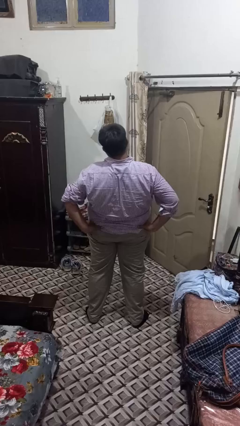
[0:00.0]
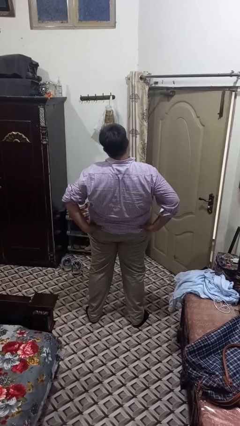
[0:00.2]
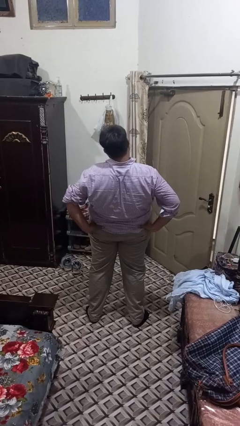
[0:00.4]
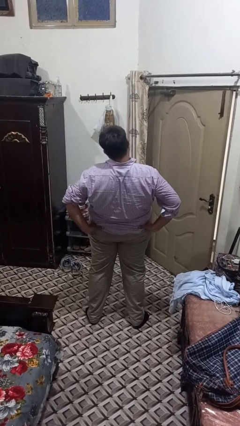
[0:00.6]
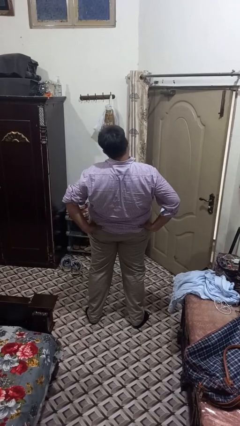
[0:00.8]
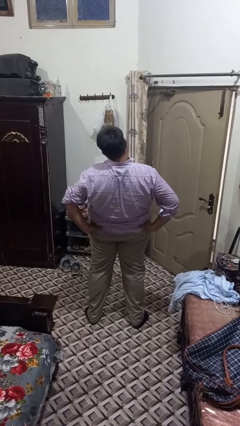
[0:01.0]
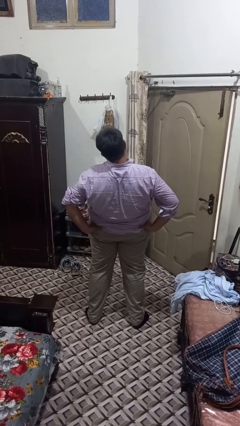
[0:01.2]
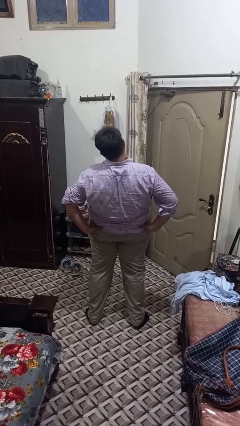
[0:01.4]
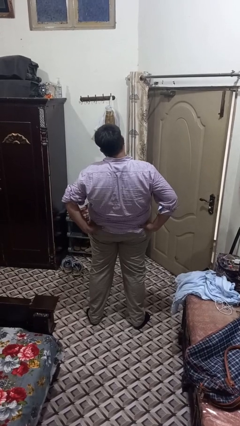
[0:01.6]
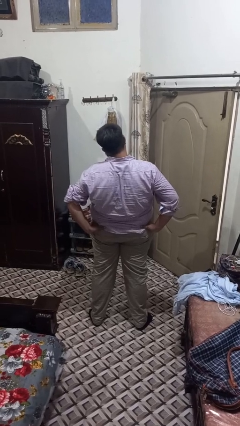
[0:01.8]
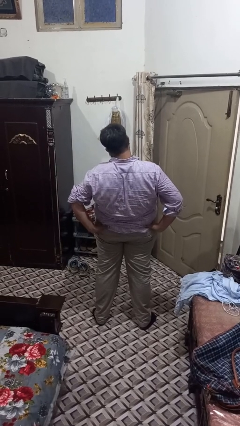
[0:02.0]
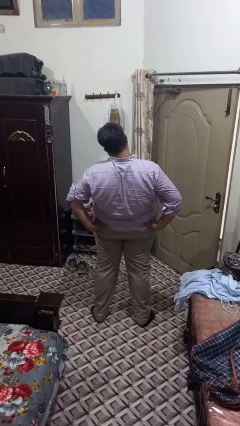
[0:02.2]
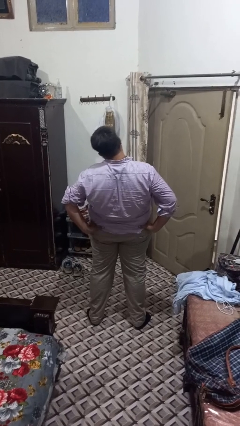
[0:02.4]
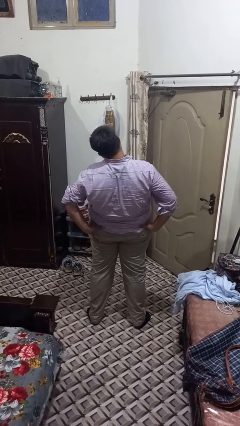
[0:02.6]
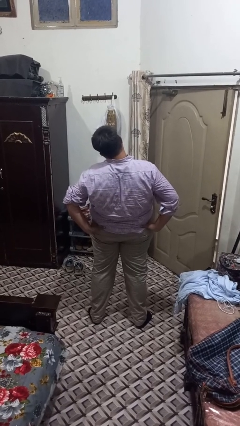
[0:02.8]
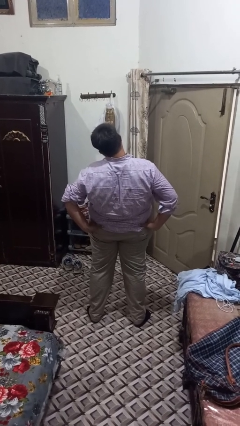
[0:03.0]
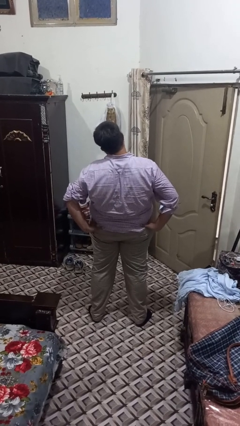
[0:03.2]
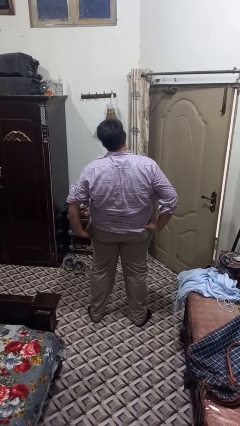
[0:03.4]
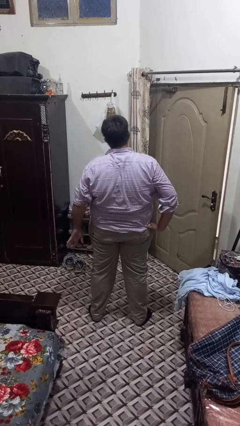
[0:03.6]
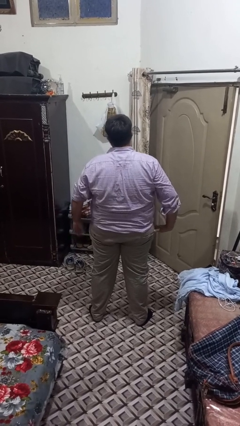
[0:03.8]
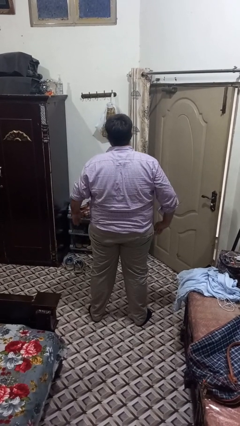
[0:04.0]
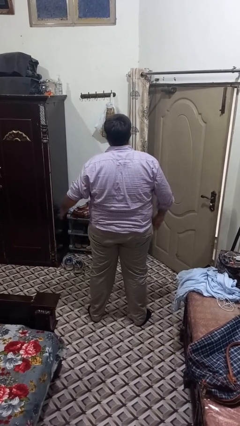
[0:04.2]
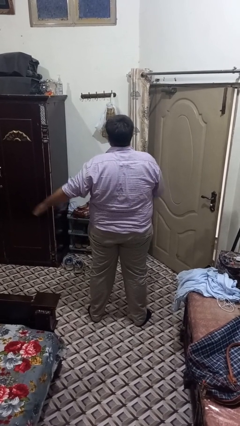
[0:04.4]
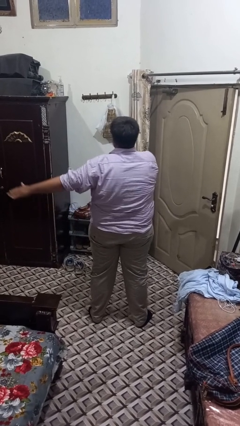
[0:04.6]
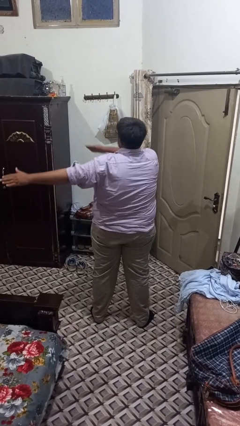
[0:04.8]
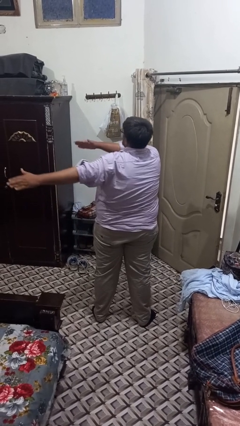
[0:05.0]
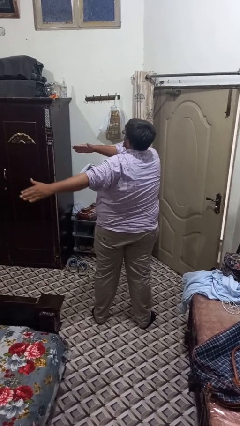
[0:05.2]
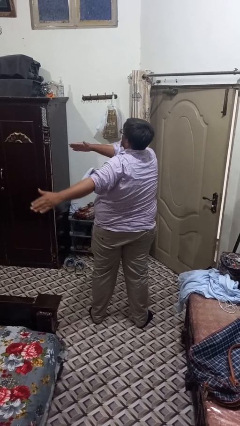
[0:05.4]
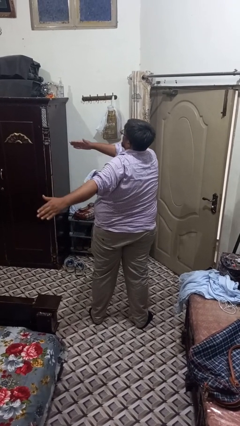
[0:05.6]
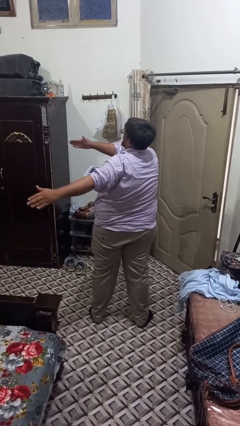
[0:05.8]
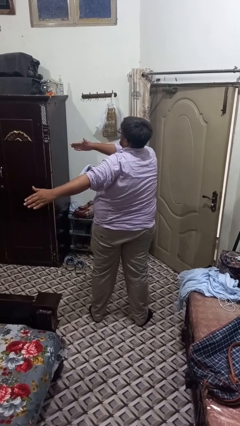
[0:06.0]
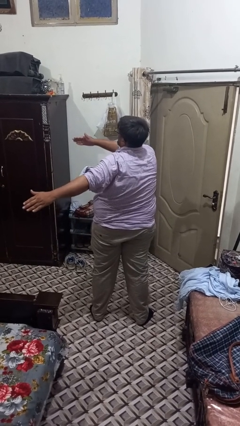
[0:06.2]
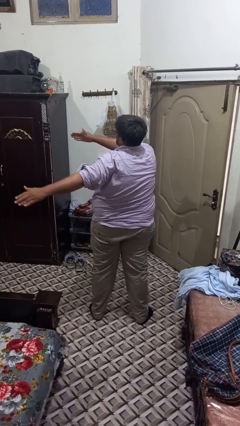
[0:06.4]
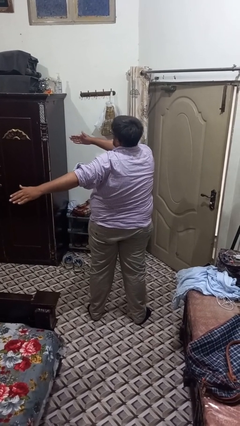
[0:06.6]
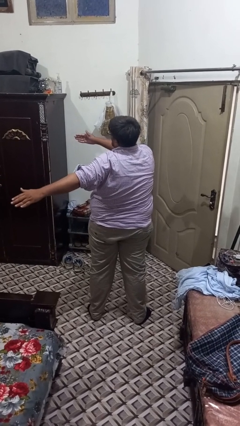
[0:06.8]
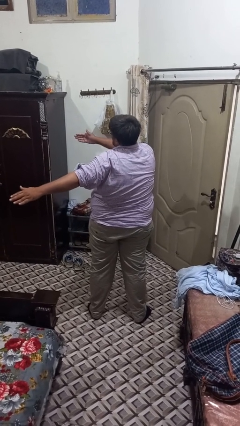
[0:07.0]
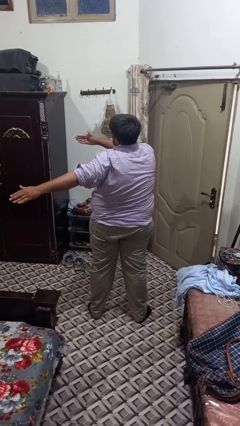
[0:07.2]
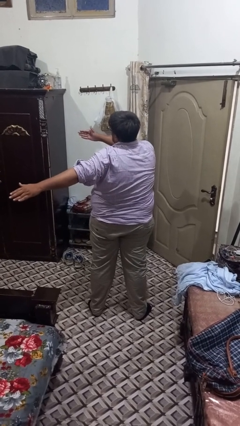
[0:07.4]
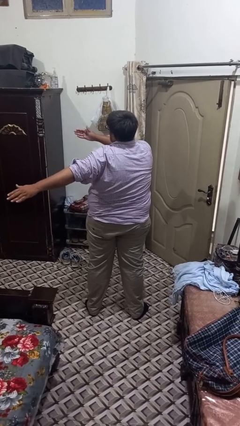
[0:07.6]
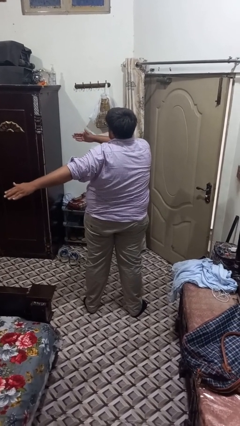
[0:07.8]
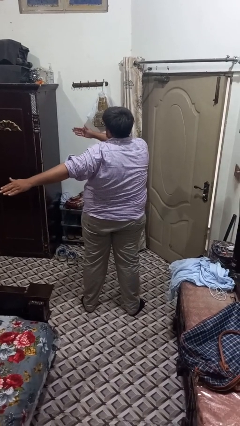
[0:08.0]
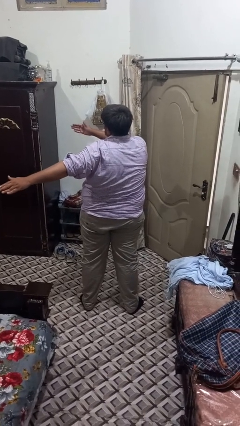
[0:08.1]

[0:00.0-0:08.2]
person stretches back

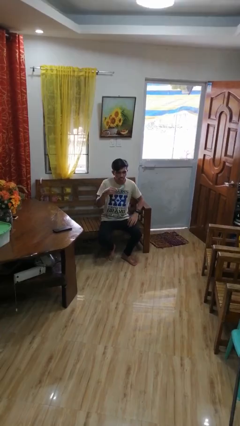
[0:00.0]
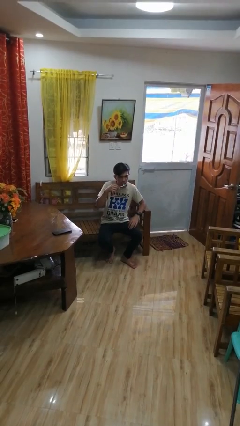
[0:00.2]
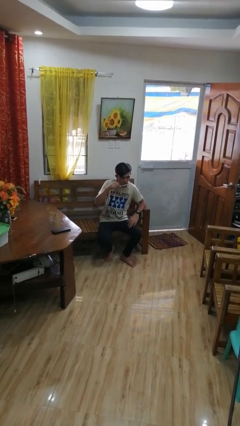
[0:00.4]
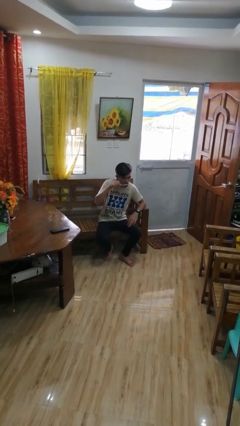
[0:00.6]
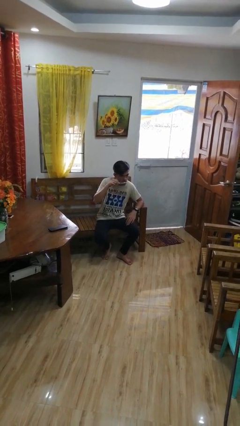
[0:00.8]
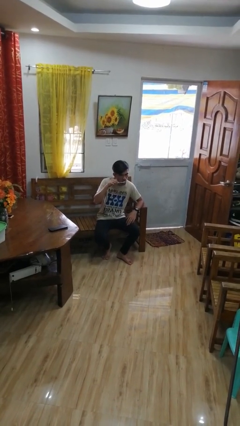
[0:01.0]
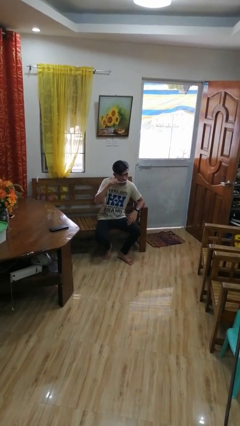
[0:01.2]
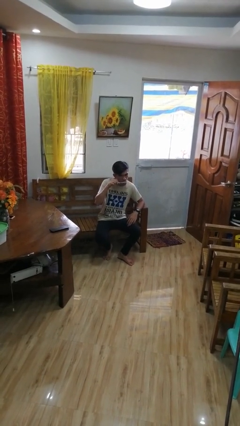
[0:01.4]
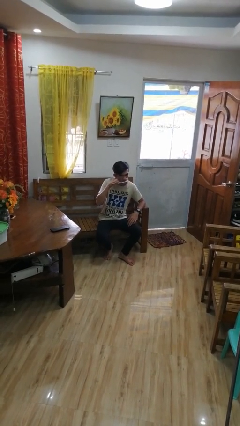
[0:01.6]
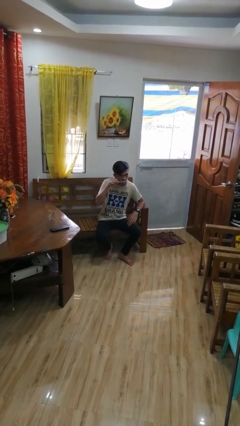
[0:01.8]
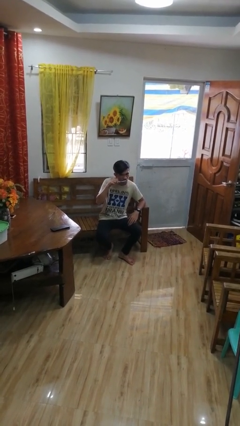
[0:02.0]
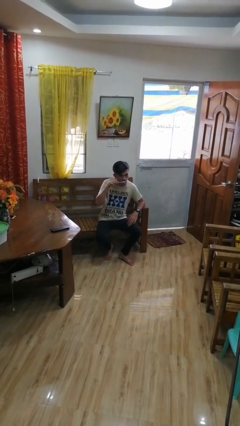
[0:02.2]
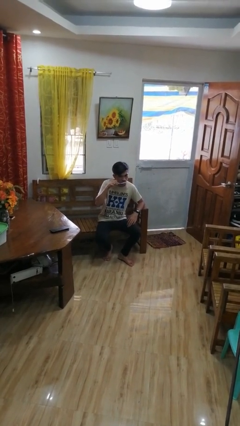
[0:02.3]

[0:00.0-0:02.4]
person brushes teeth

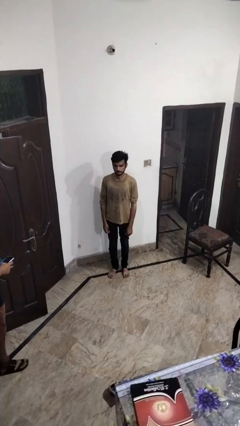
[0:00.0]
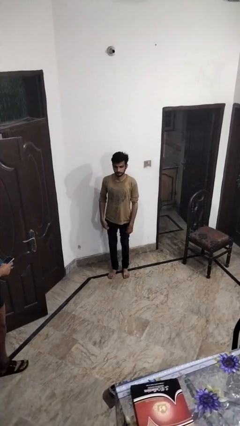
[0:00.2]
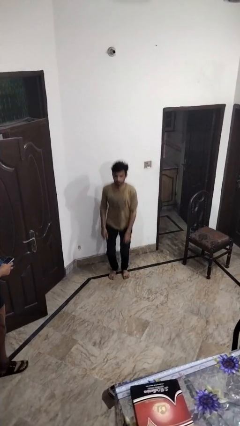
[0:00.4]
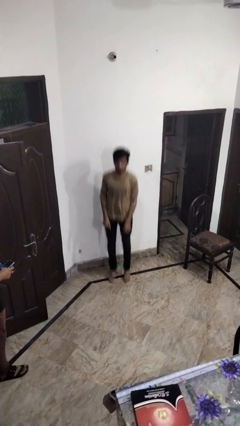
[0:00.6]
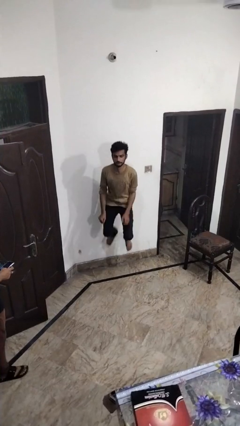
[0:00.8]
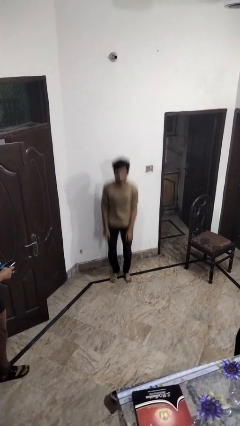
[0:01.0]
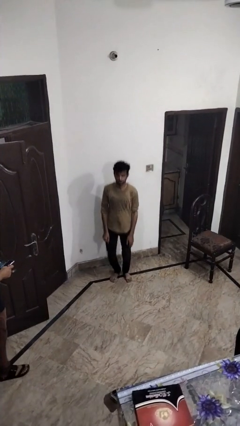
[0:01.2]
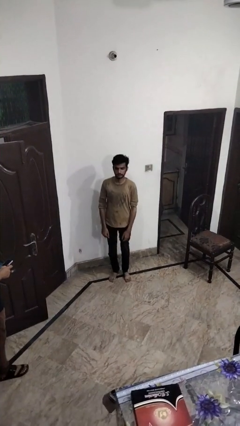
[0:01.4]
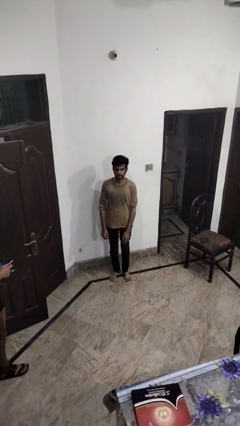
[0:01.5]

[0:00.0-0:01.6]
person jumps

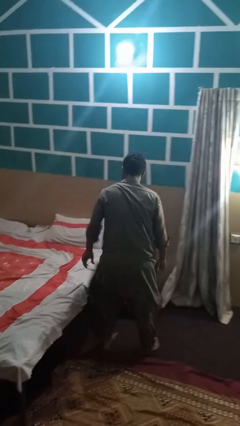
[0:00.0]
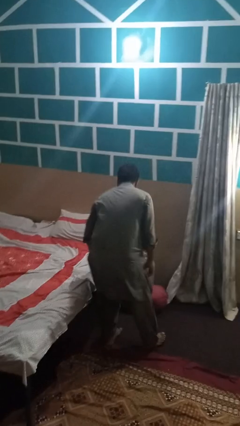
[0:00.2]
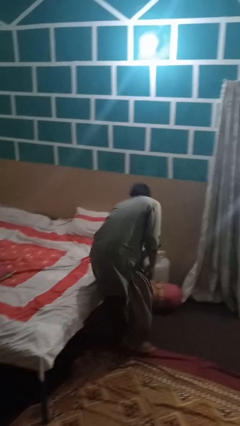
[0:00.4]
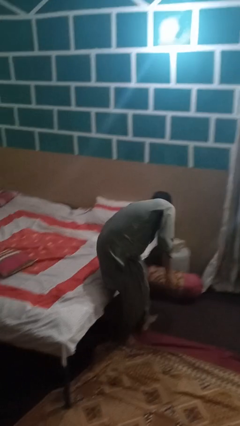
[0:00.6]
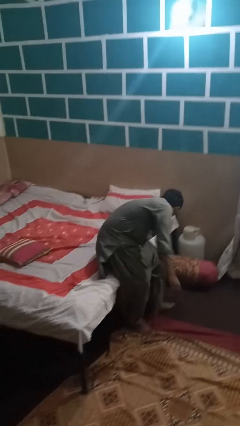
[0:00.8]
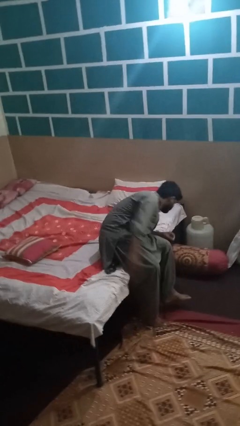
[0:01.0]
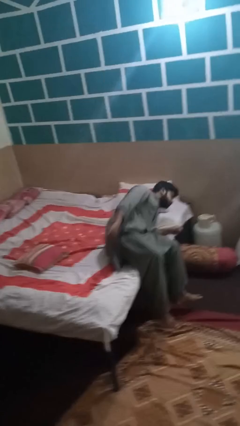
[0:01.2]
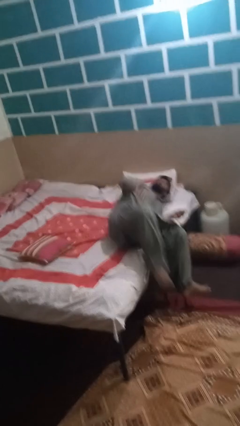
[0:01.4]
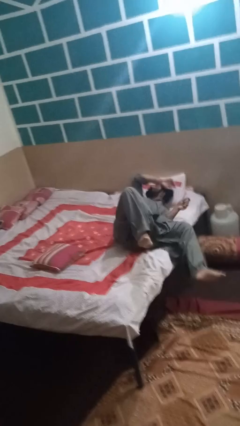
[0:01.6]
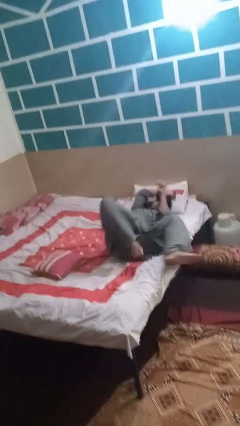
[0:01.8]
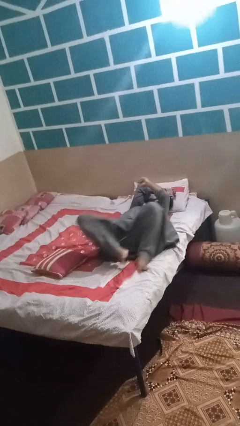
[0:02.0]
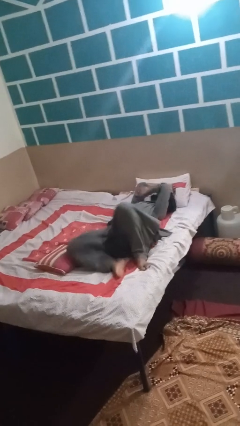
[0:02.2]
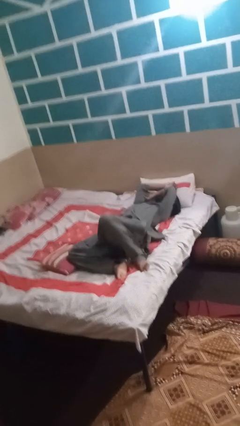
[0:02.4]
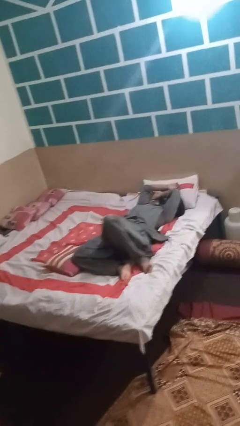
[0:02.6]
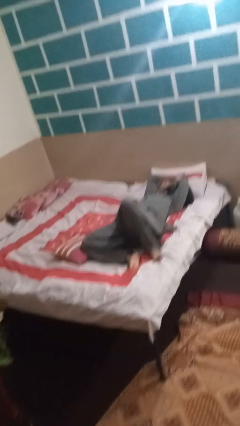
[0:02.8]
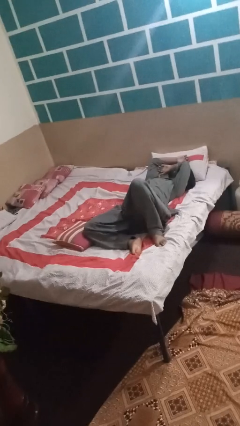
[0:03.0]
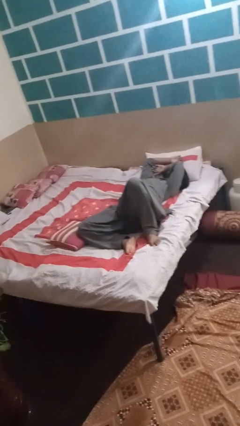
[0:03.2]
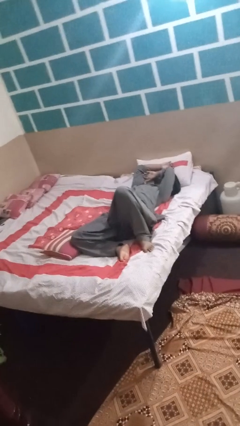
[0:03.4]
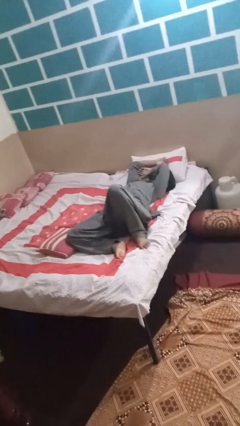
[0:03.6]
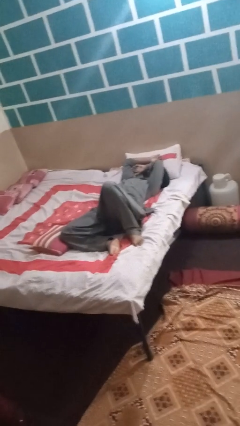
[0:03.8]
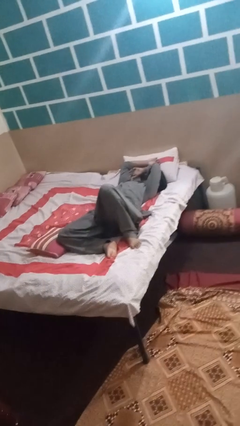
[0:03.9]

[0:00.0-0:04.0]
person lies down on bed

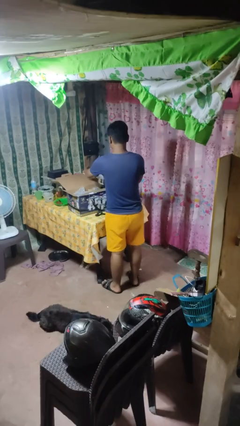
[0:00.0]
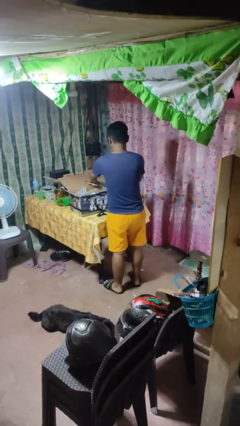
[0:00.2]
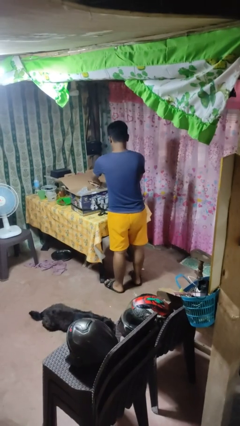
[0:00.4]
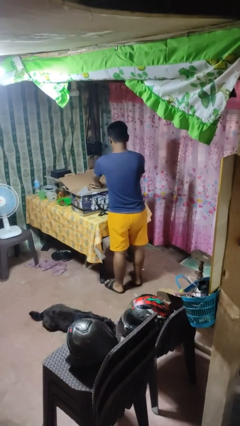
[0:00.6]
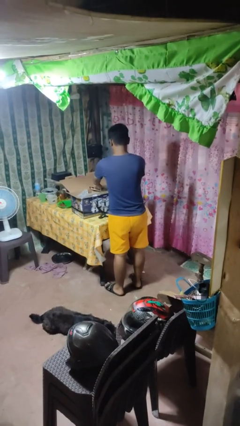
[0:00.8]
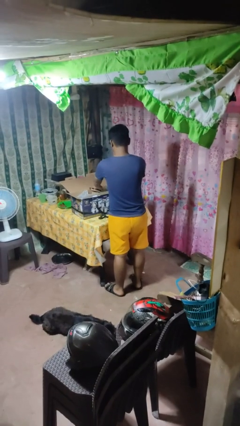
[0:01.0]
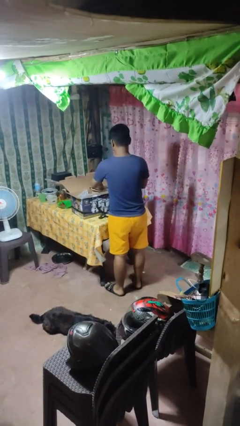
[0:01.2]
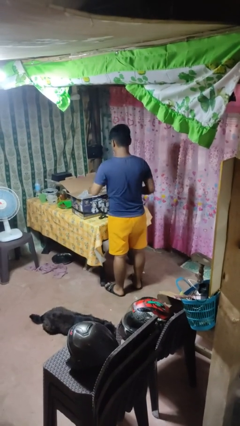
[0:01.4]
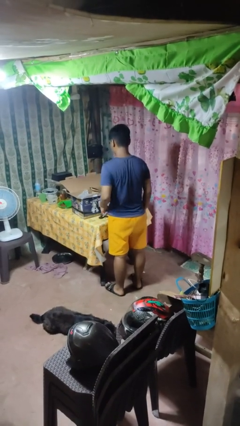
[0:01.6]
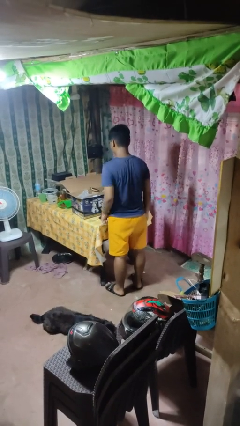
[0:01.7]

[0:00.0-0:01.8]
person puts object into box
